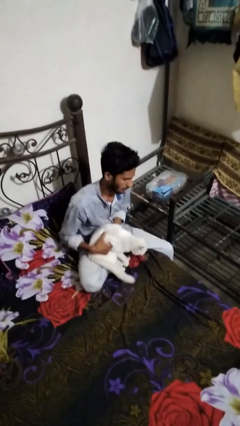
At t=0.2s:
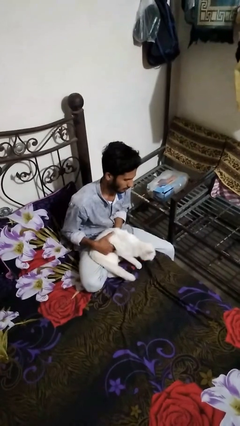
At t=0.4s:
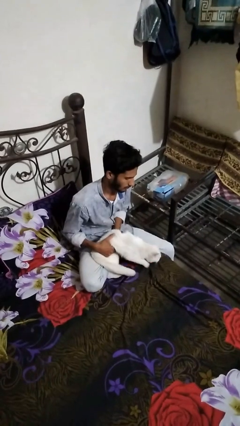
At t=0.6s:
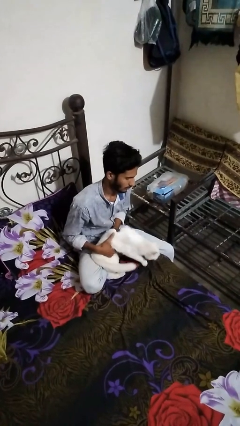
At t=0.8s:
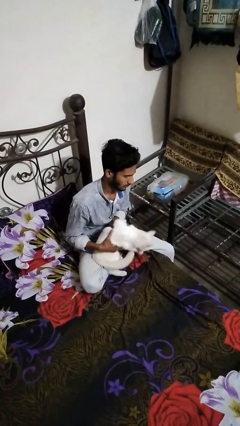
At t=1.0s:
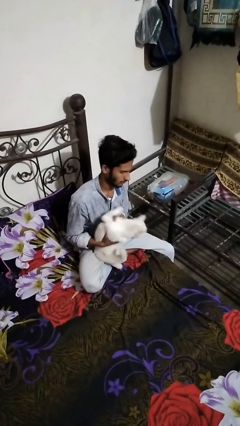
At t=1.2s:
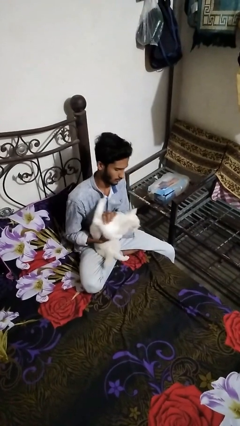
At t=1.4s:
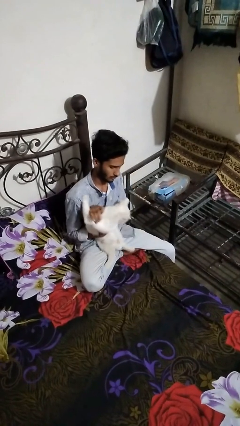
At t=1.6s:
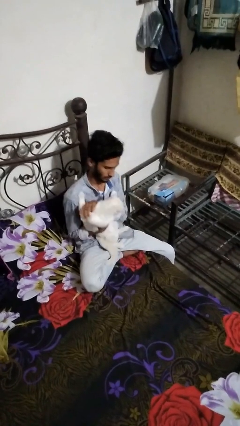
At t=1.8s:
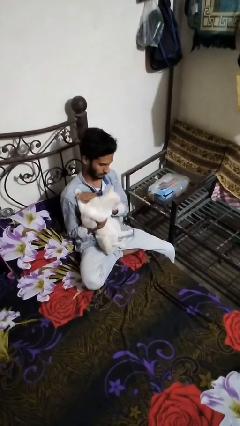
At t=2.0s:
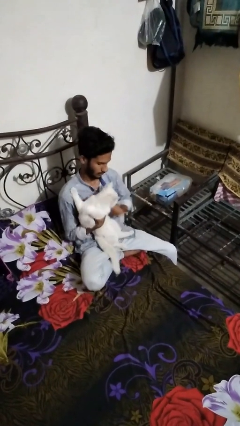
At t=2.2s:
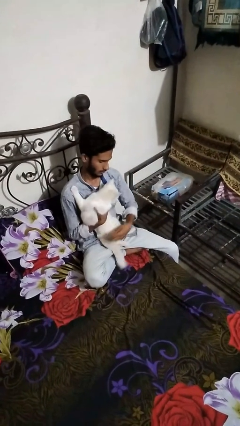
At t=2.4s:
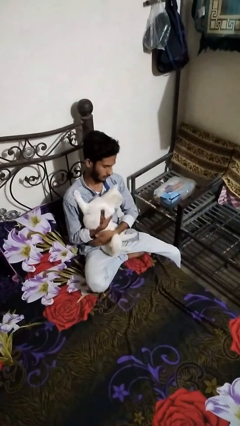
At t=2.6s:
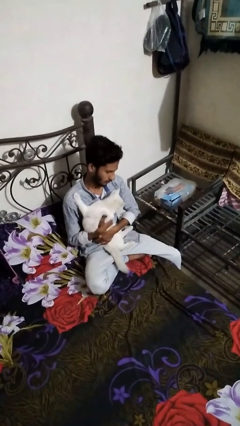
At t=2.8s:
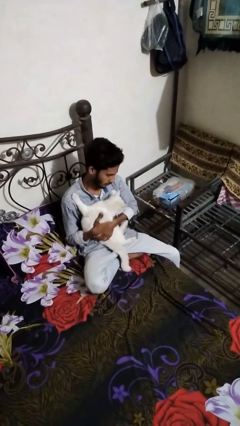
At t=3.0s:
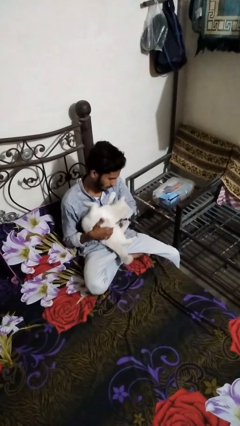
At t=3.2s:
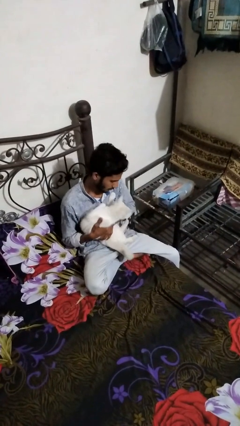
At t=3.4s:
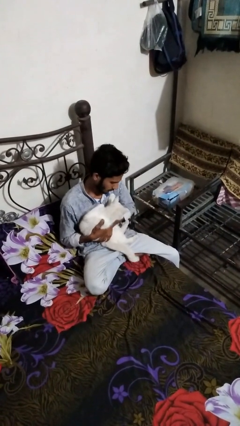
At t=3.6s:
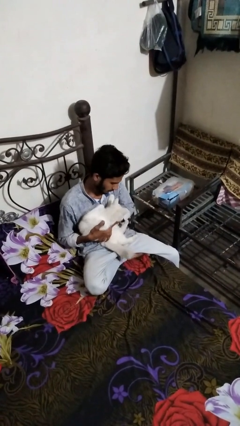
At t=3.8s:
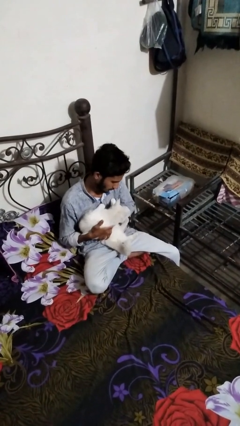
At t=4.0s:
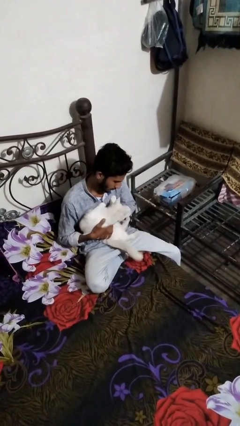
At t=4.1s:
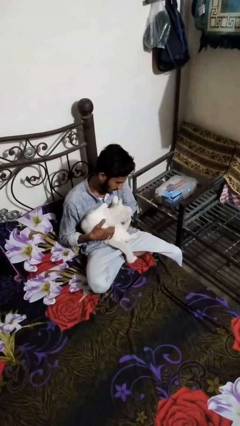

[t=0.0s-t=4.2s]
person hugs cat

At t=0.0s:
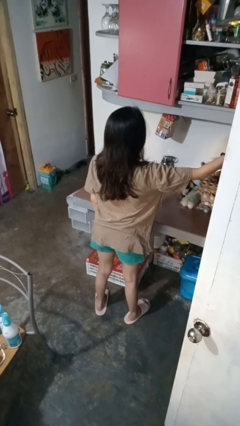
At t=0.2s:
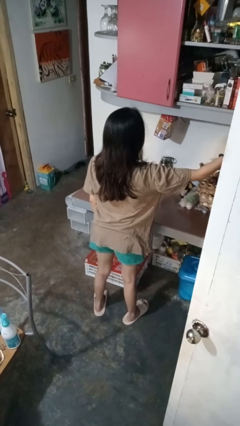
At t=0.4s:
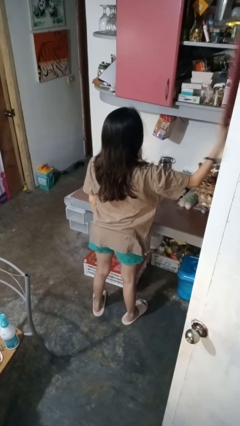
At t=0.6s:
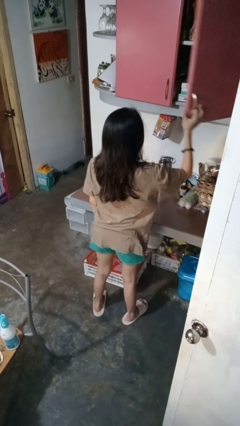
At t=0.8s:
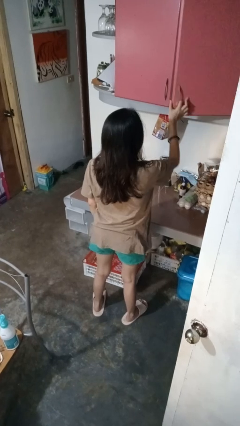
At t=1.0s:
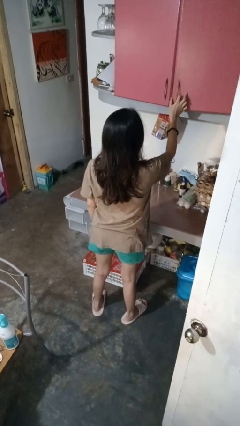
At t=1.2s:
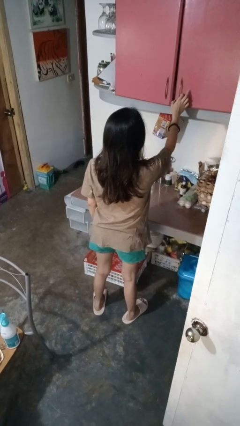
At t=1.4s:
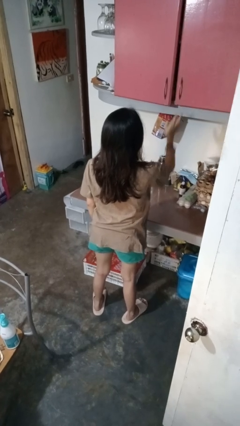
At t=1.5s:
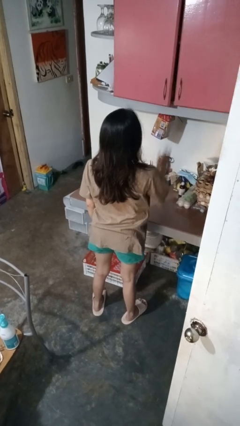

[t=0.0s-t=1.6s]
person closes cabinet

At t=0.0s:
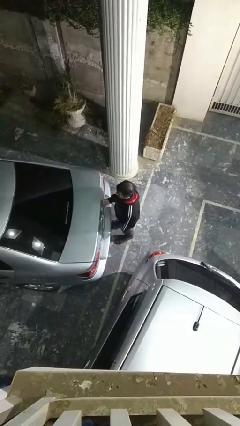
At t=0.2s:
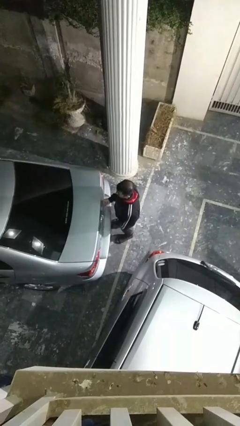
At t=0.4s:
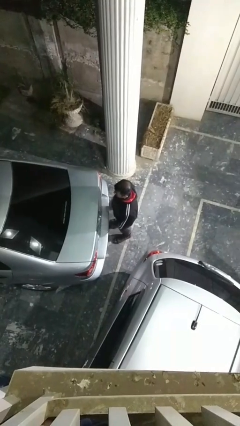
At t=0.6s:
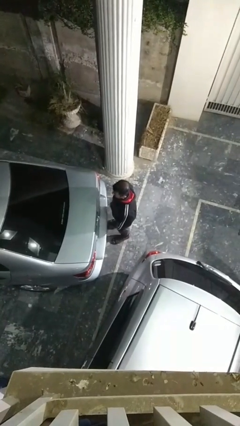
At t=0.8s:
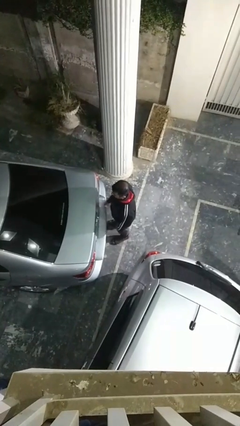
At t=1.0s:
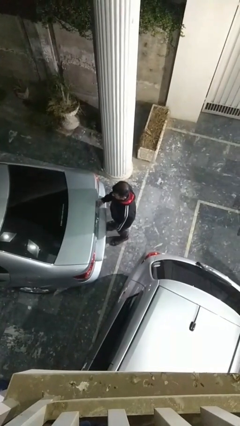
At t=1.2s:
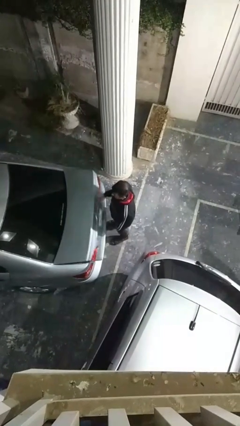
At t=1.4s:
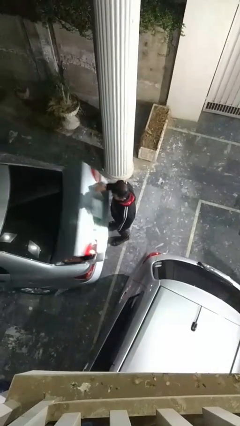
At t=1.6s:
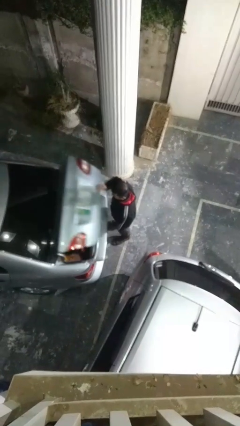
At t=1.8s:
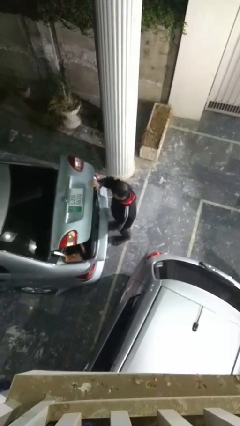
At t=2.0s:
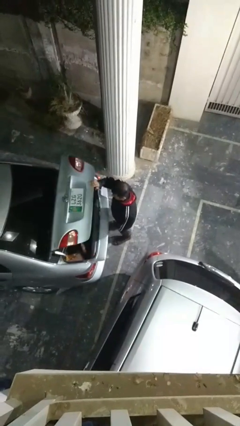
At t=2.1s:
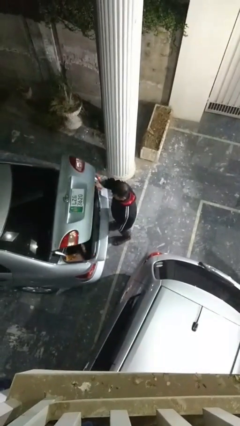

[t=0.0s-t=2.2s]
person opens car trunk

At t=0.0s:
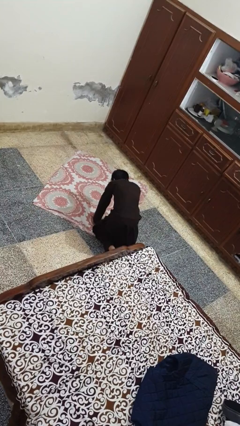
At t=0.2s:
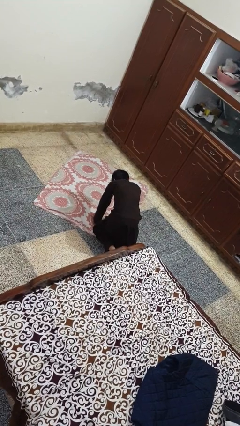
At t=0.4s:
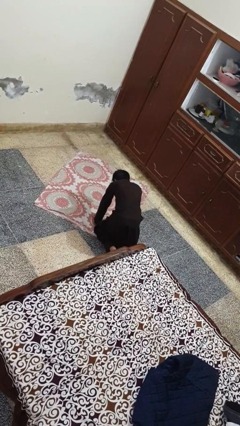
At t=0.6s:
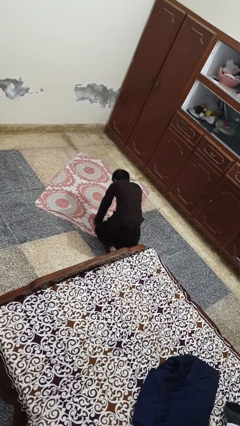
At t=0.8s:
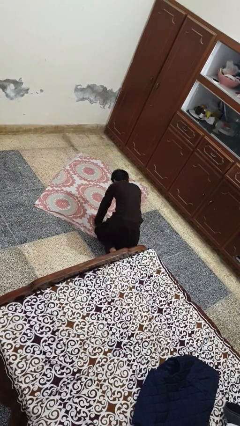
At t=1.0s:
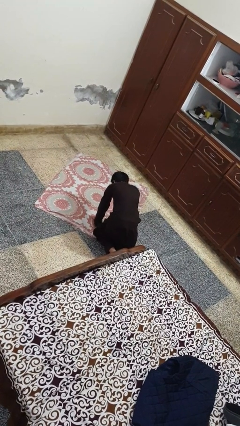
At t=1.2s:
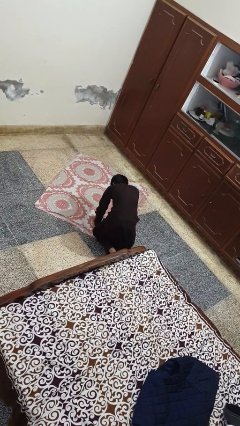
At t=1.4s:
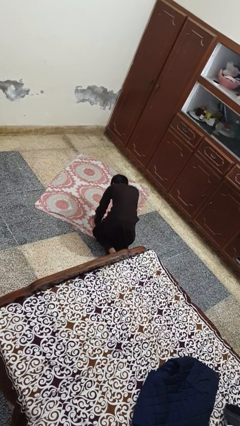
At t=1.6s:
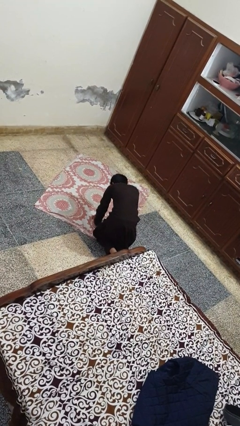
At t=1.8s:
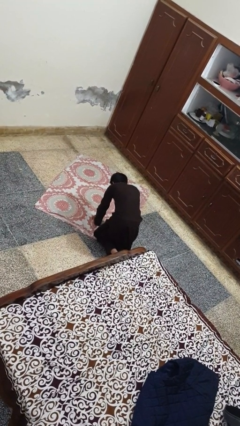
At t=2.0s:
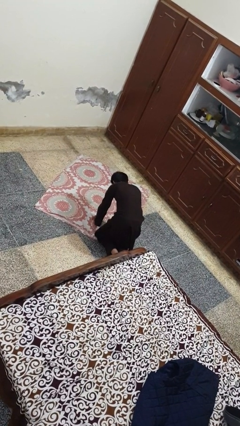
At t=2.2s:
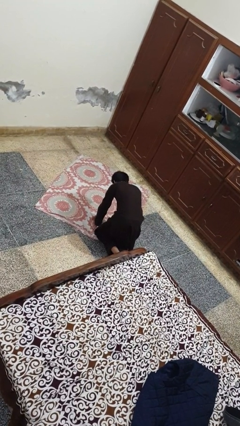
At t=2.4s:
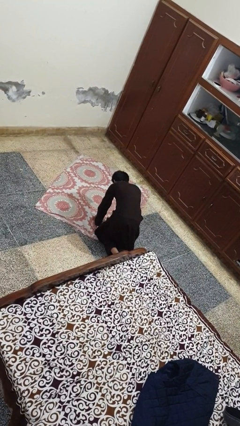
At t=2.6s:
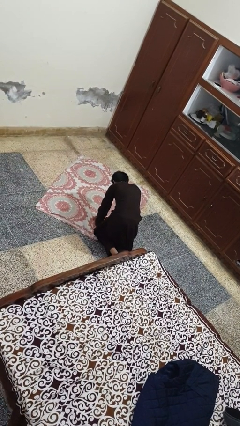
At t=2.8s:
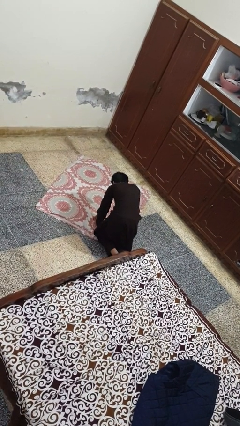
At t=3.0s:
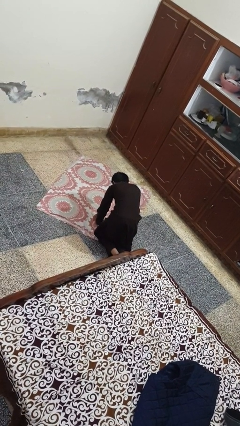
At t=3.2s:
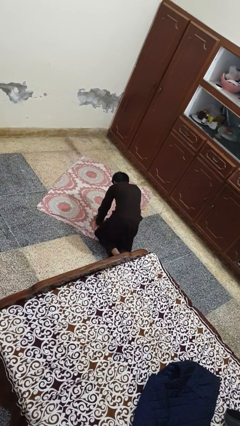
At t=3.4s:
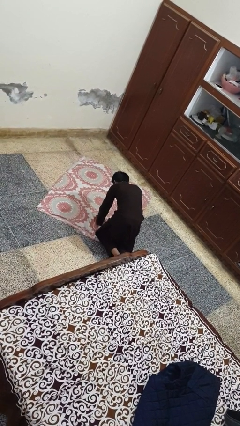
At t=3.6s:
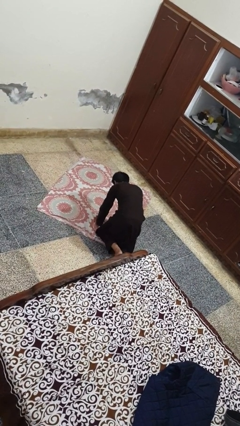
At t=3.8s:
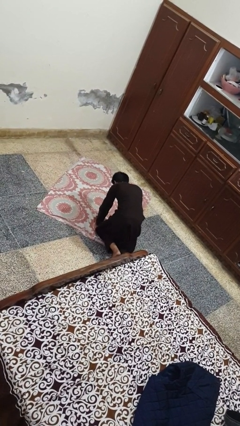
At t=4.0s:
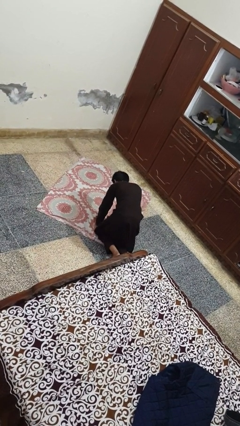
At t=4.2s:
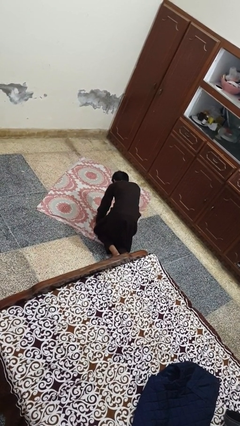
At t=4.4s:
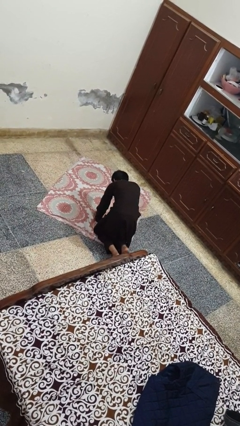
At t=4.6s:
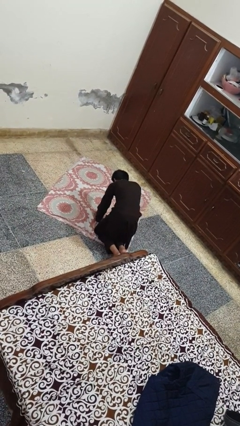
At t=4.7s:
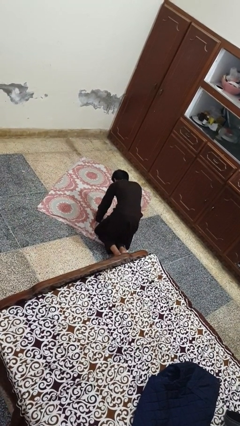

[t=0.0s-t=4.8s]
person crawls

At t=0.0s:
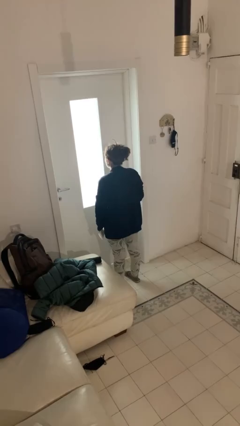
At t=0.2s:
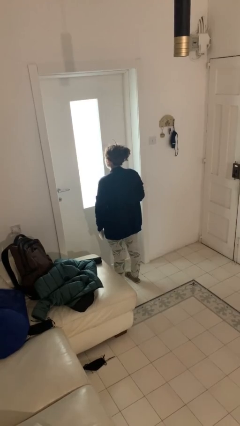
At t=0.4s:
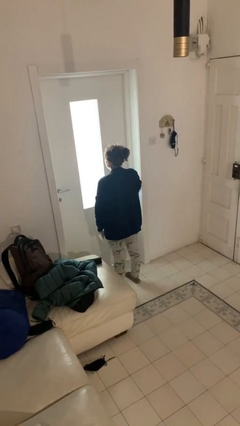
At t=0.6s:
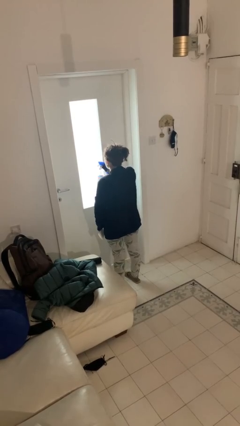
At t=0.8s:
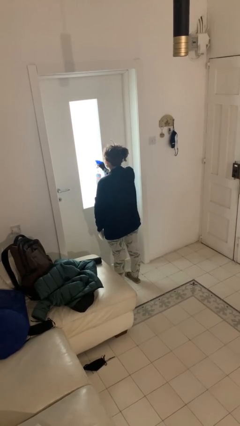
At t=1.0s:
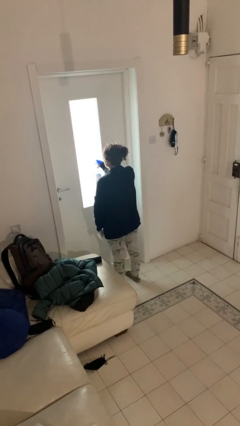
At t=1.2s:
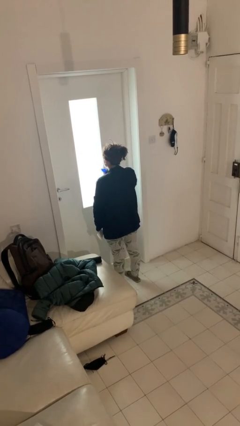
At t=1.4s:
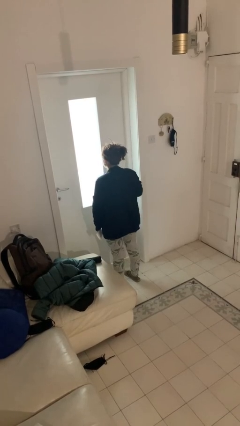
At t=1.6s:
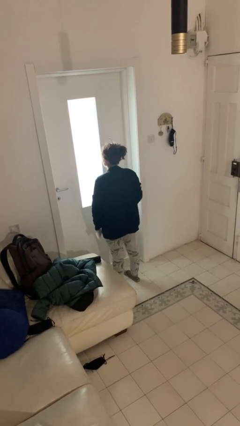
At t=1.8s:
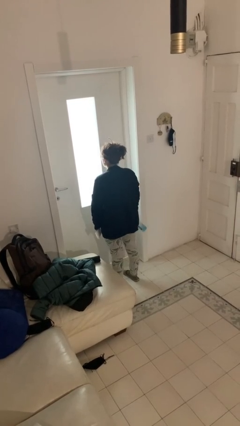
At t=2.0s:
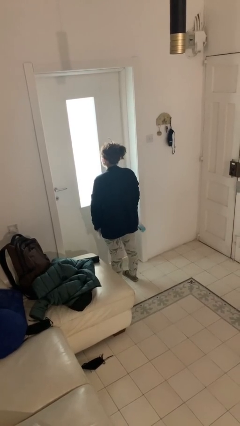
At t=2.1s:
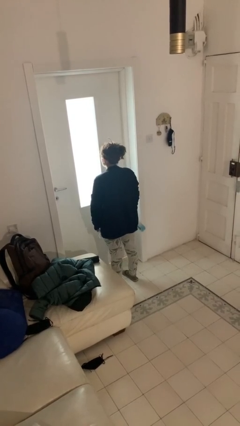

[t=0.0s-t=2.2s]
person sprays from bottle

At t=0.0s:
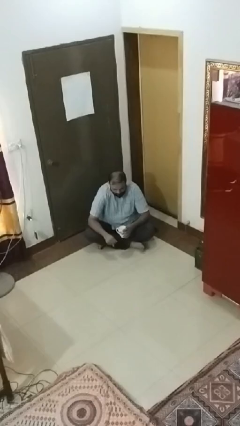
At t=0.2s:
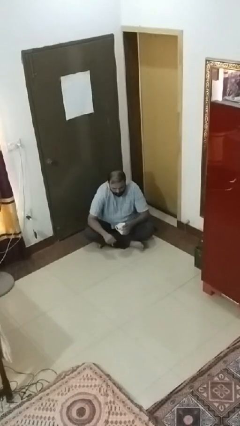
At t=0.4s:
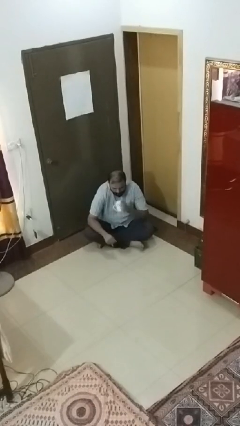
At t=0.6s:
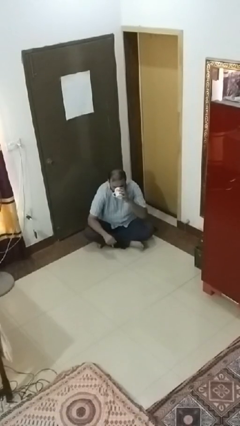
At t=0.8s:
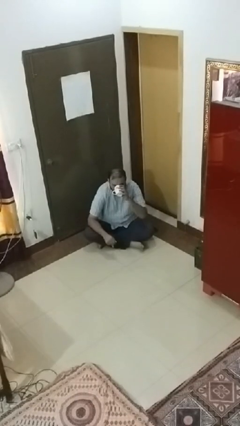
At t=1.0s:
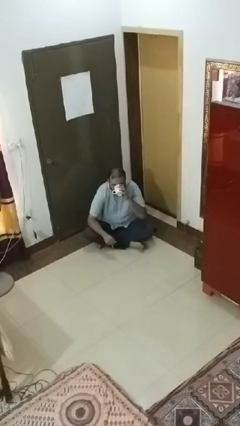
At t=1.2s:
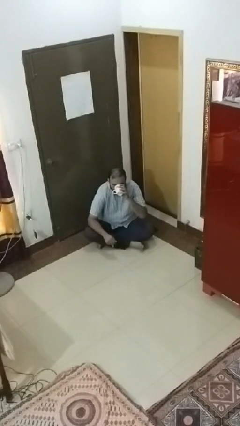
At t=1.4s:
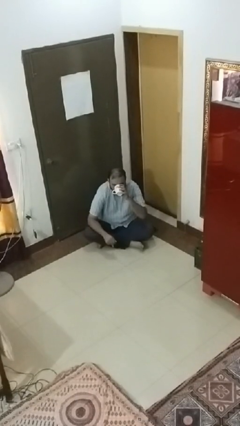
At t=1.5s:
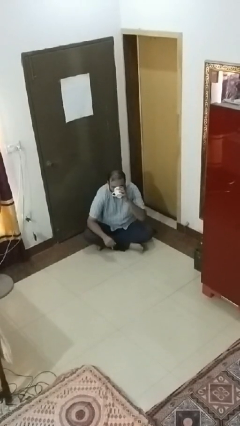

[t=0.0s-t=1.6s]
person drinks from mug

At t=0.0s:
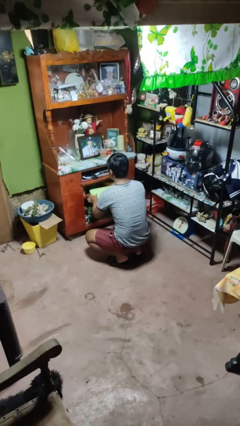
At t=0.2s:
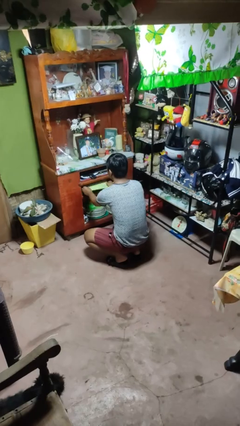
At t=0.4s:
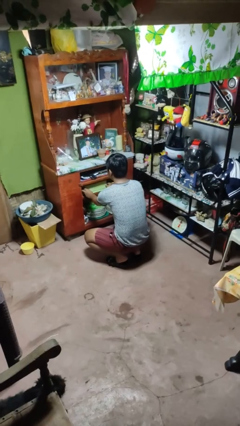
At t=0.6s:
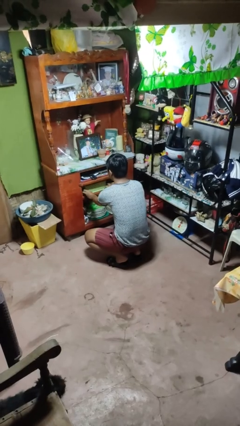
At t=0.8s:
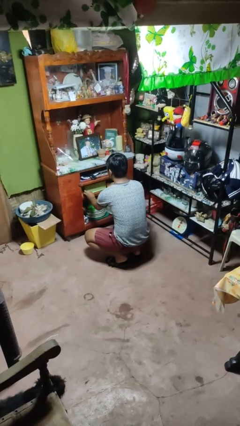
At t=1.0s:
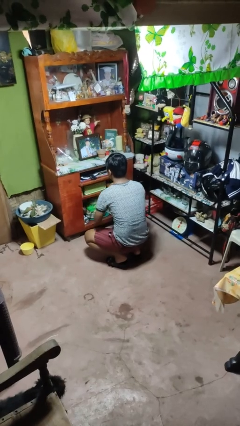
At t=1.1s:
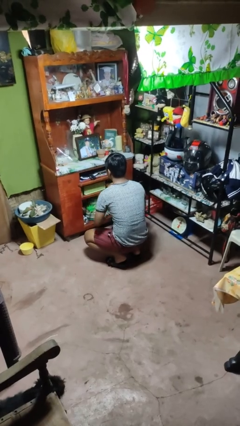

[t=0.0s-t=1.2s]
person puts down object into cabinet
